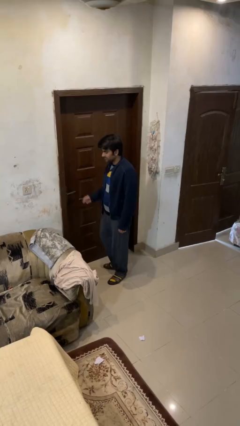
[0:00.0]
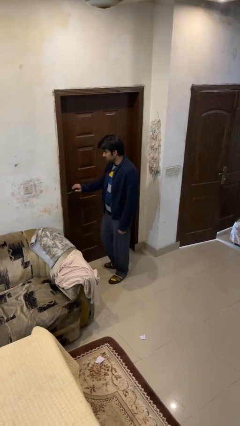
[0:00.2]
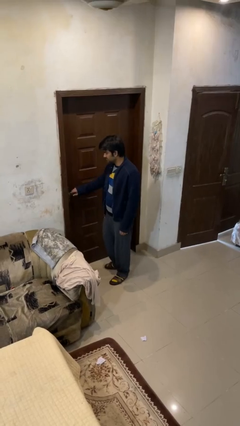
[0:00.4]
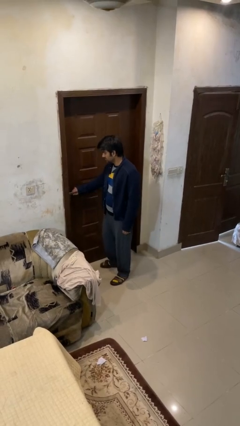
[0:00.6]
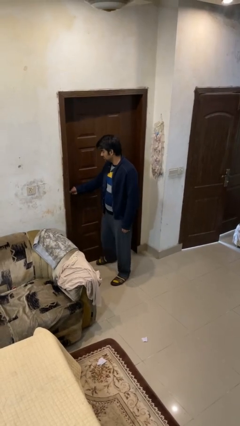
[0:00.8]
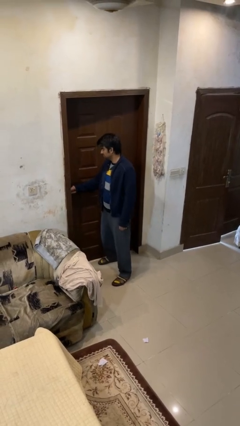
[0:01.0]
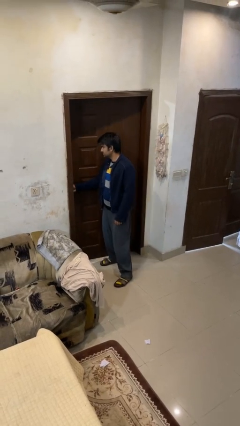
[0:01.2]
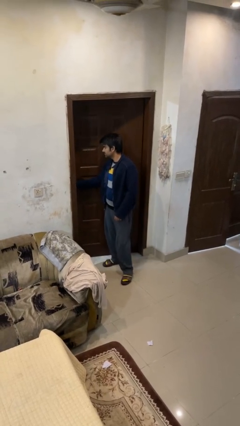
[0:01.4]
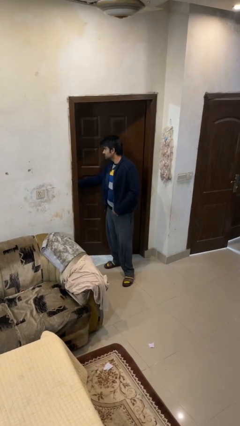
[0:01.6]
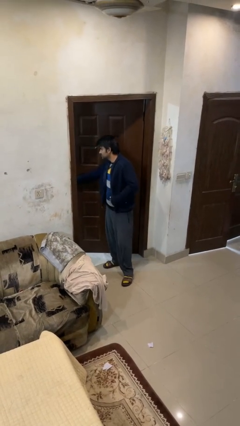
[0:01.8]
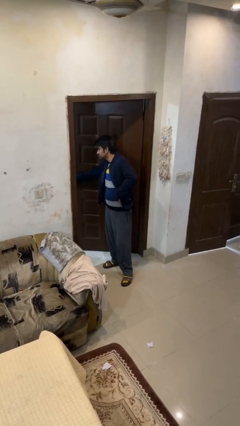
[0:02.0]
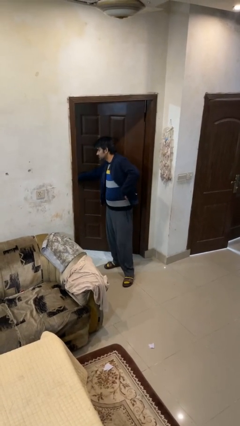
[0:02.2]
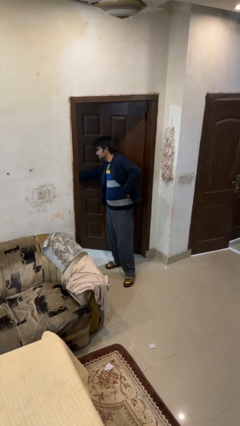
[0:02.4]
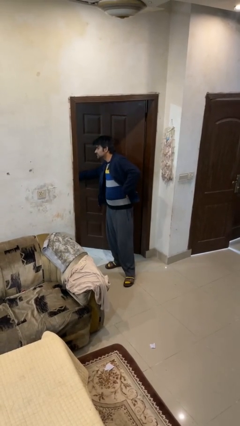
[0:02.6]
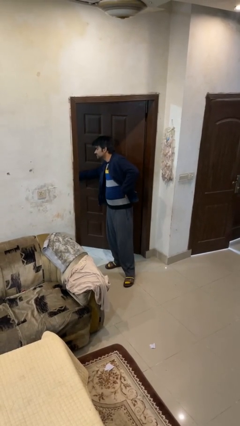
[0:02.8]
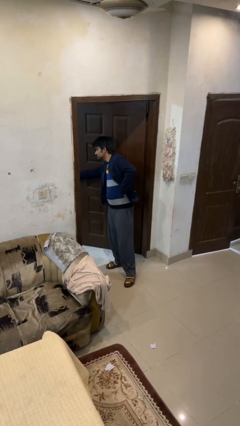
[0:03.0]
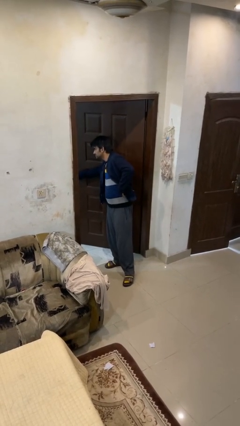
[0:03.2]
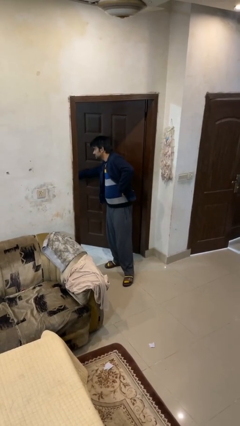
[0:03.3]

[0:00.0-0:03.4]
person opens facility door

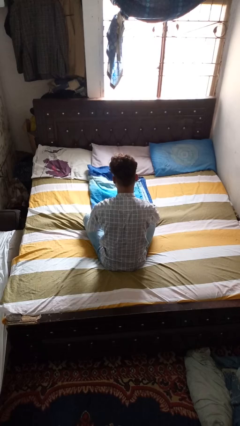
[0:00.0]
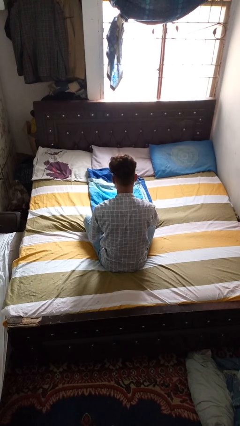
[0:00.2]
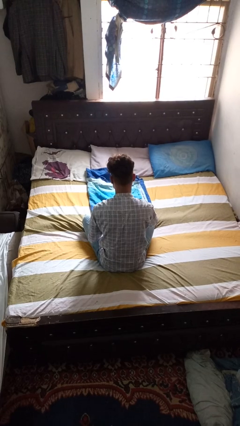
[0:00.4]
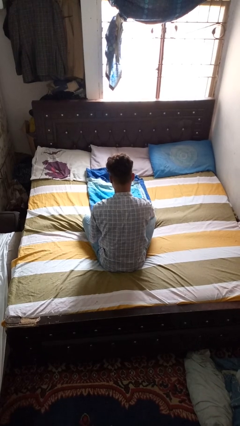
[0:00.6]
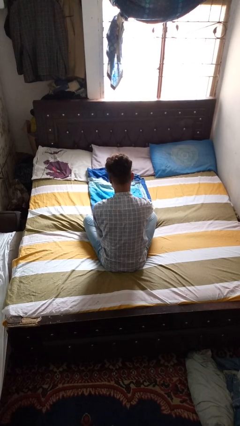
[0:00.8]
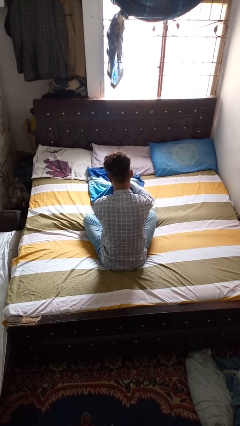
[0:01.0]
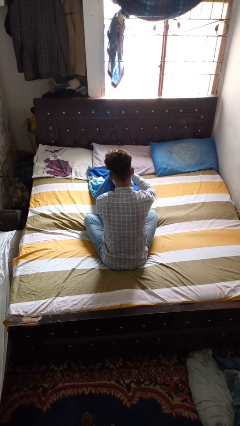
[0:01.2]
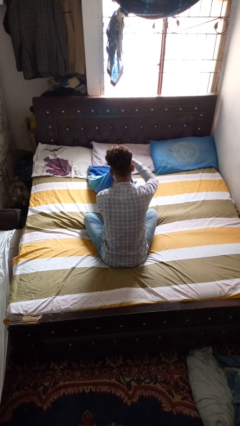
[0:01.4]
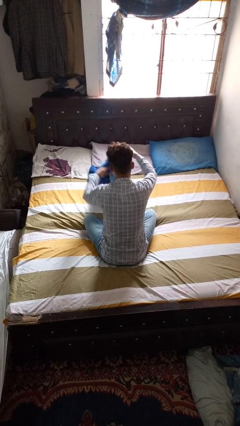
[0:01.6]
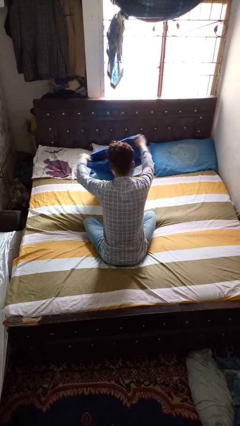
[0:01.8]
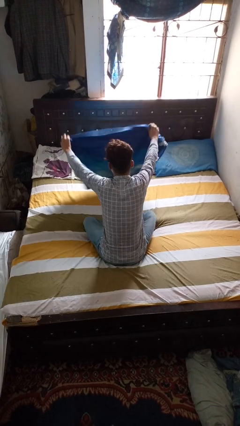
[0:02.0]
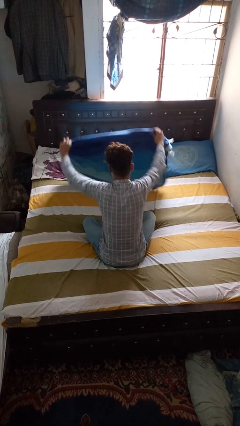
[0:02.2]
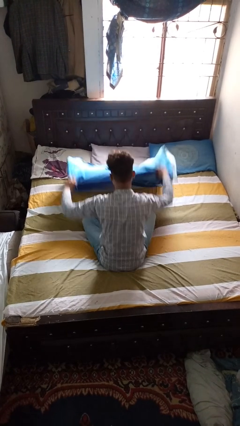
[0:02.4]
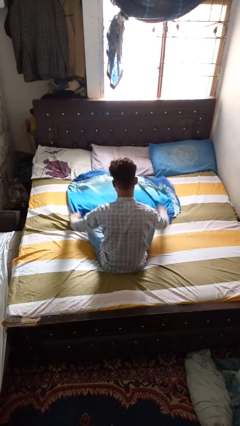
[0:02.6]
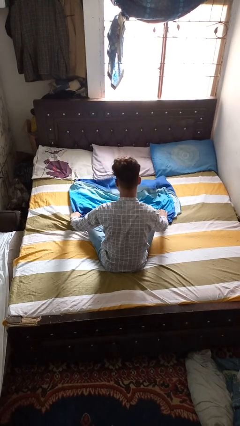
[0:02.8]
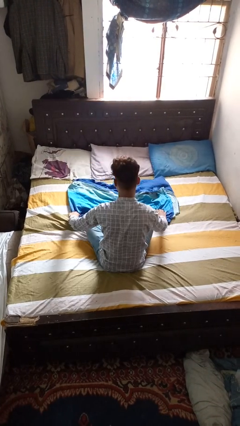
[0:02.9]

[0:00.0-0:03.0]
person unfolds blanket

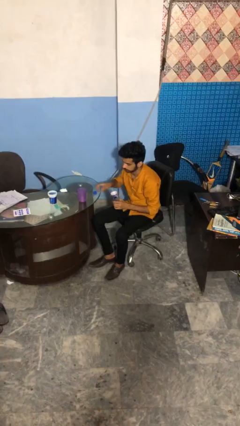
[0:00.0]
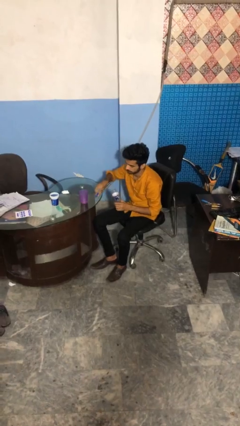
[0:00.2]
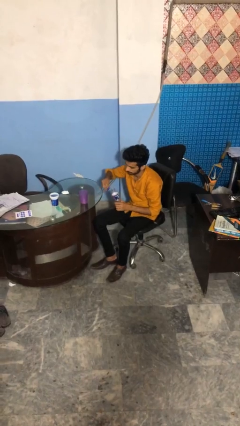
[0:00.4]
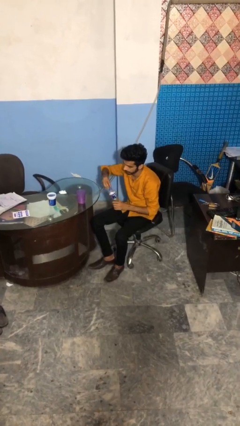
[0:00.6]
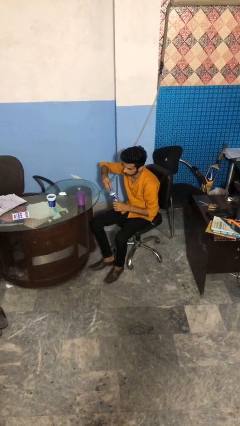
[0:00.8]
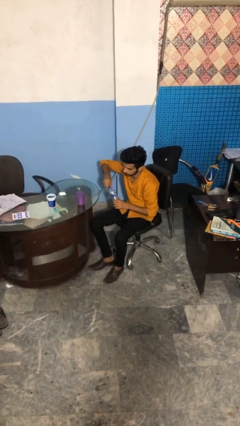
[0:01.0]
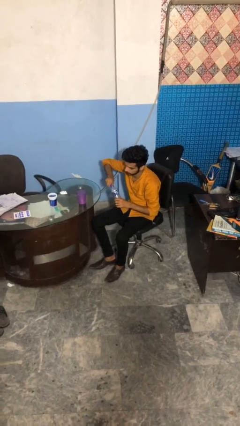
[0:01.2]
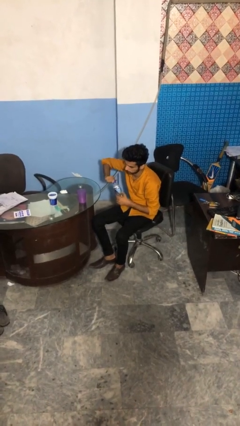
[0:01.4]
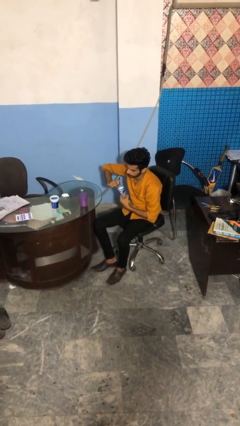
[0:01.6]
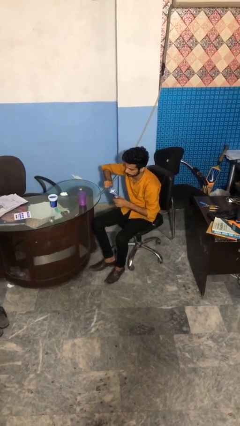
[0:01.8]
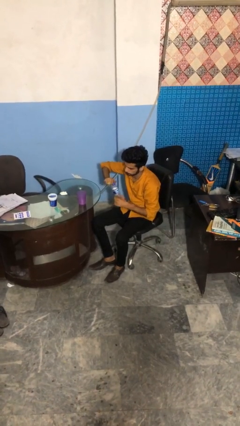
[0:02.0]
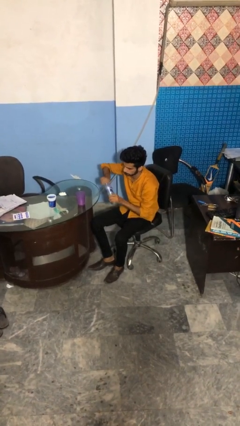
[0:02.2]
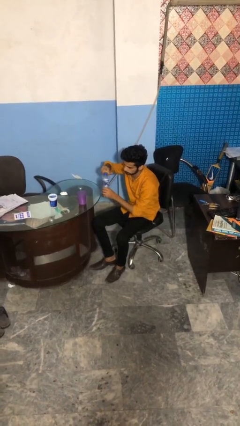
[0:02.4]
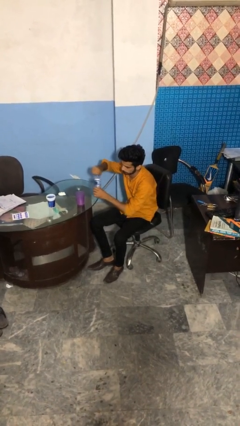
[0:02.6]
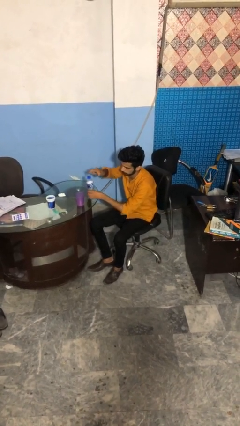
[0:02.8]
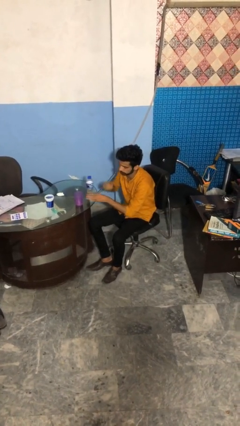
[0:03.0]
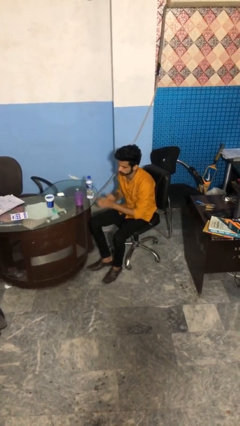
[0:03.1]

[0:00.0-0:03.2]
person screws lid to bottle

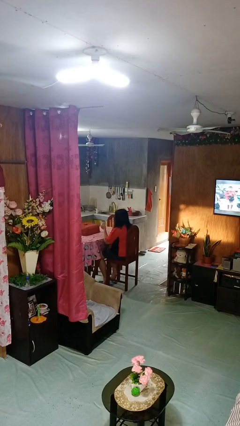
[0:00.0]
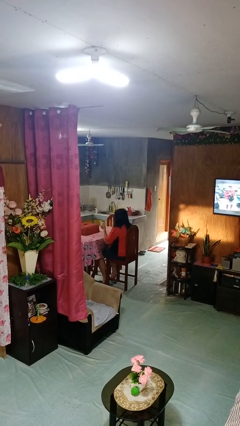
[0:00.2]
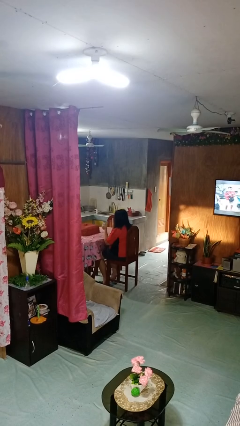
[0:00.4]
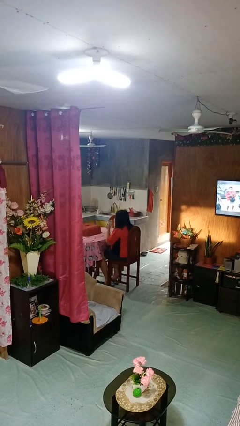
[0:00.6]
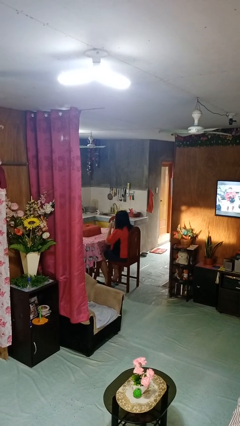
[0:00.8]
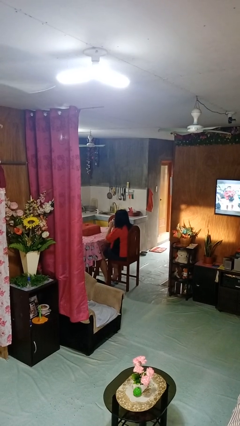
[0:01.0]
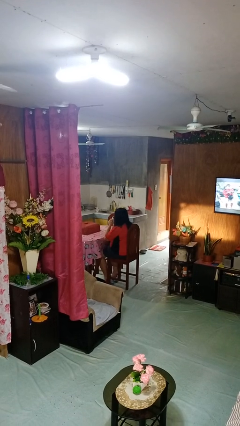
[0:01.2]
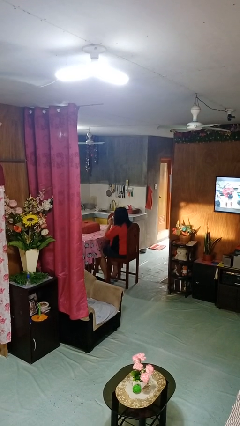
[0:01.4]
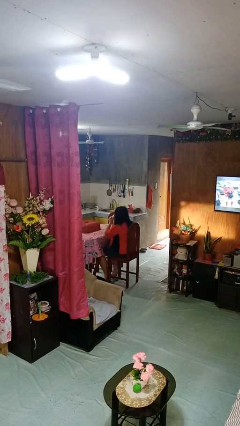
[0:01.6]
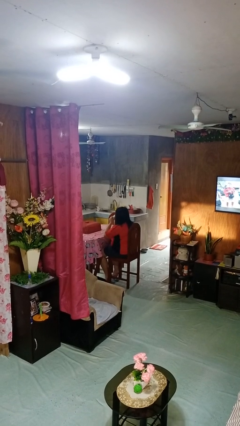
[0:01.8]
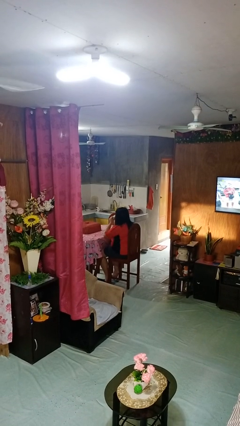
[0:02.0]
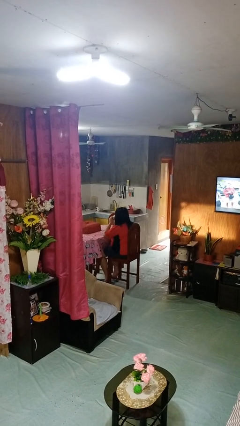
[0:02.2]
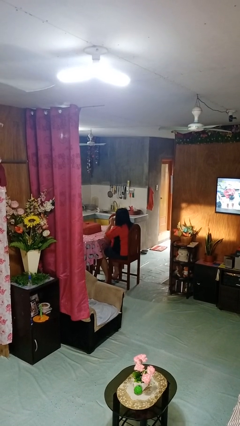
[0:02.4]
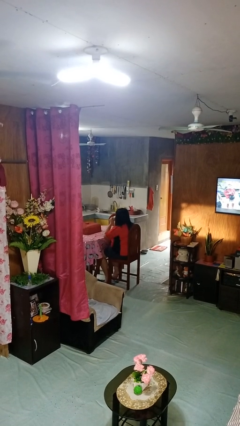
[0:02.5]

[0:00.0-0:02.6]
person drinks from mug

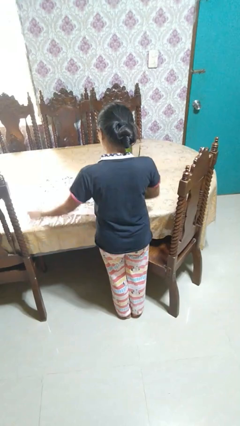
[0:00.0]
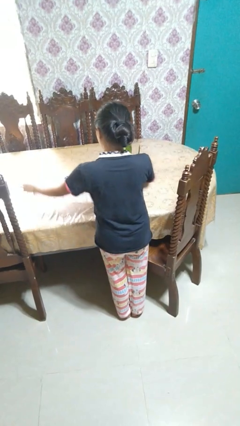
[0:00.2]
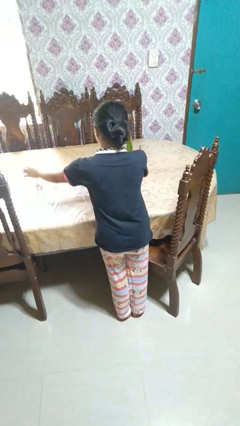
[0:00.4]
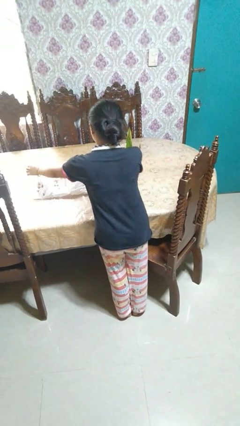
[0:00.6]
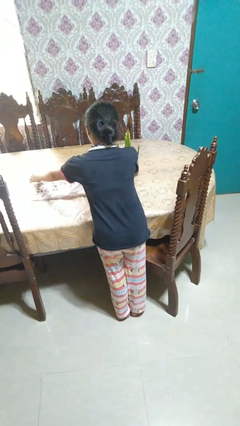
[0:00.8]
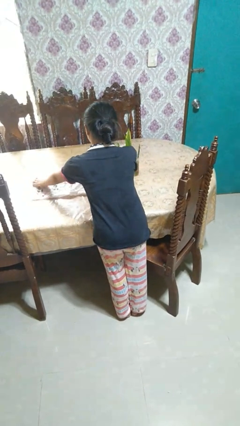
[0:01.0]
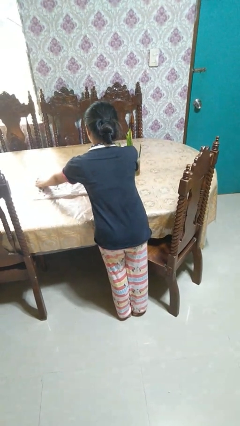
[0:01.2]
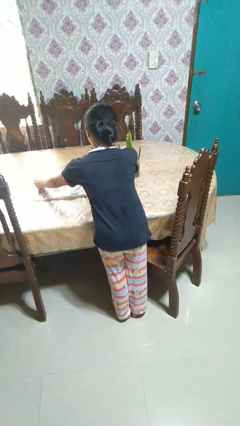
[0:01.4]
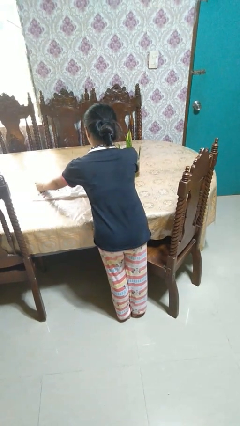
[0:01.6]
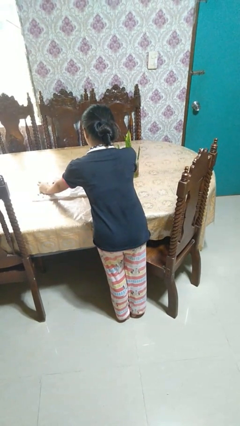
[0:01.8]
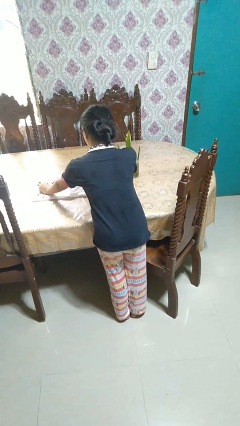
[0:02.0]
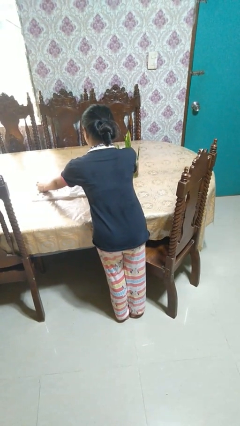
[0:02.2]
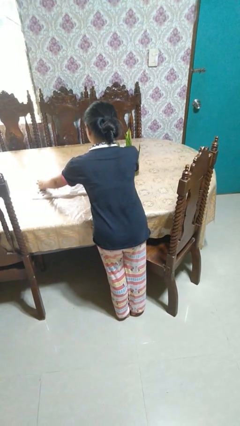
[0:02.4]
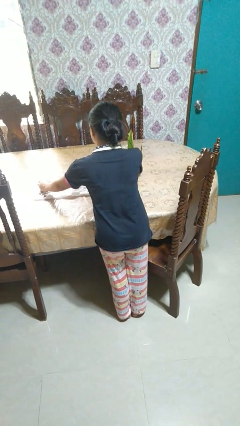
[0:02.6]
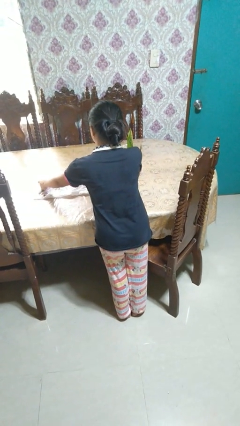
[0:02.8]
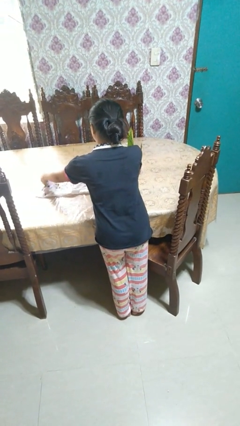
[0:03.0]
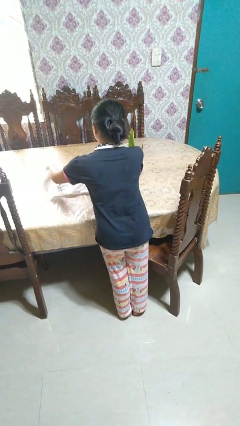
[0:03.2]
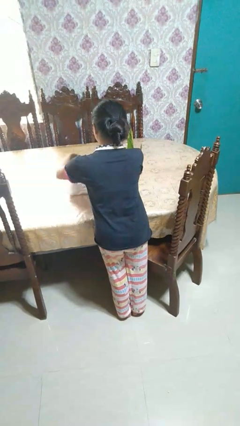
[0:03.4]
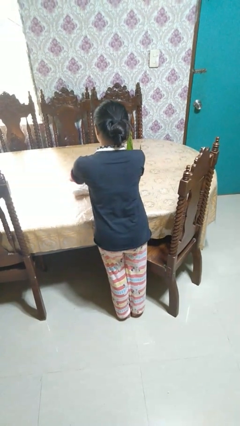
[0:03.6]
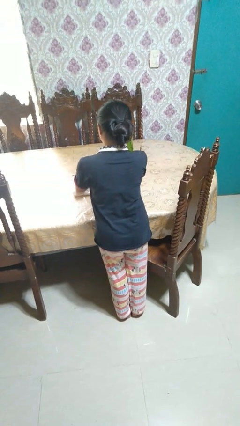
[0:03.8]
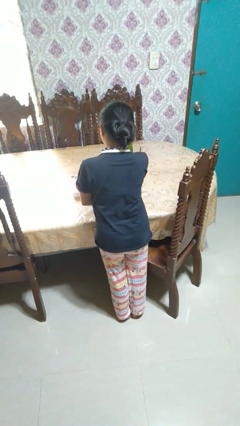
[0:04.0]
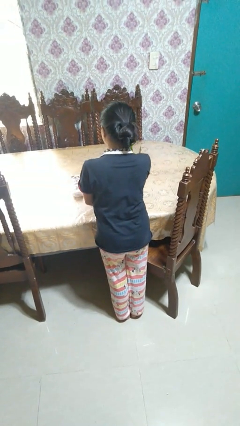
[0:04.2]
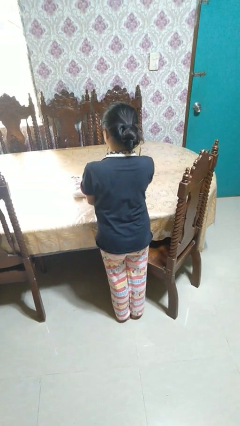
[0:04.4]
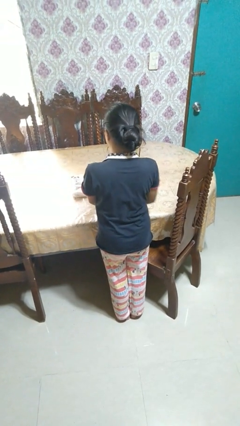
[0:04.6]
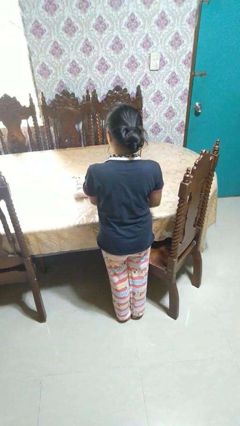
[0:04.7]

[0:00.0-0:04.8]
person folds tablecloth

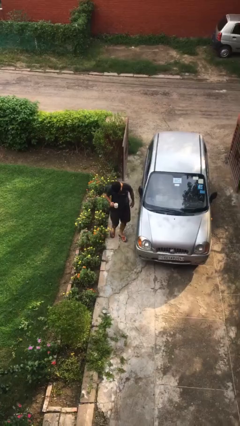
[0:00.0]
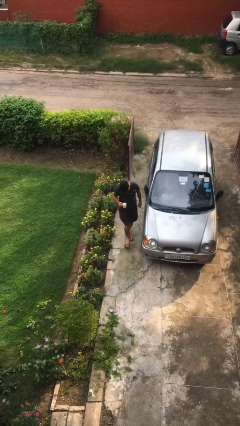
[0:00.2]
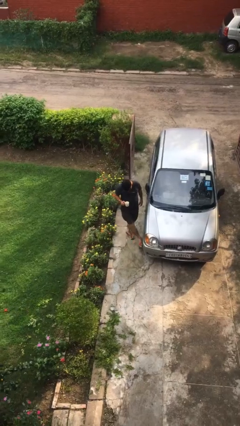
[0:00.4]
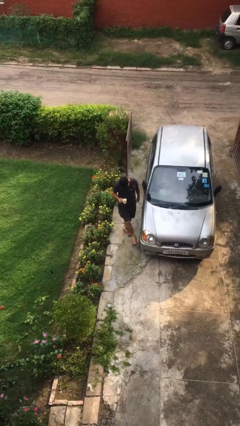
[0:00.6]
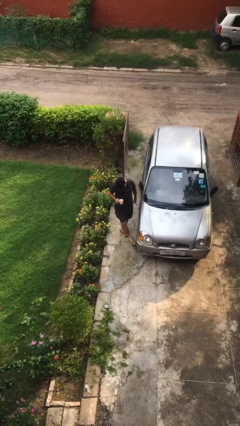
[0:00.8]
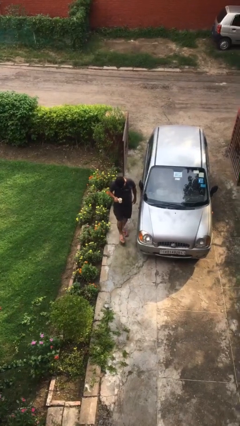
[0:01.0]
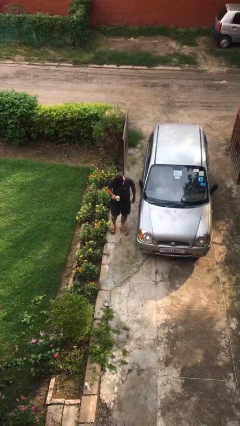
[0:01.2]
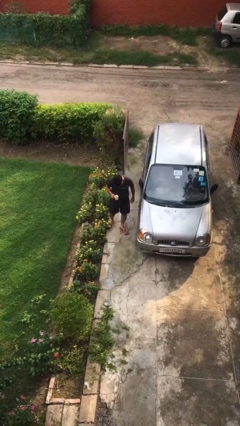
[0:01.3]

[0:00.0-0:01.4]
person kicks car tires
